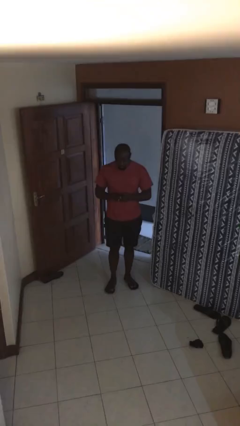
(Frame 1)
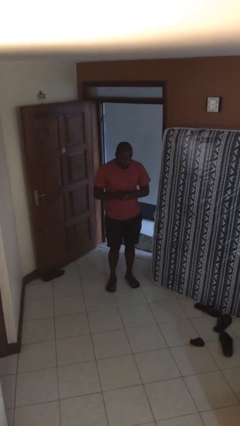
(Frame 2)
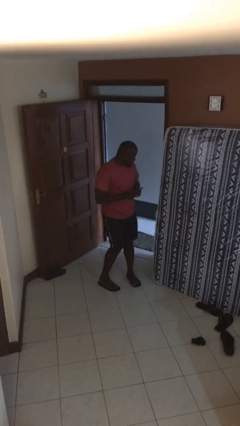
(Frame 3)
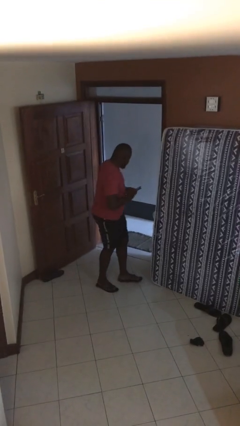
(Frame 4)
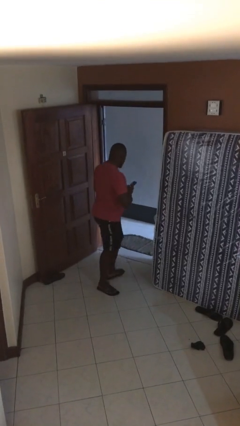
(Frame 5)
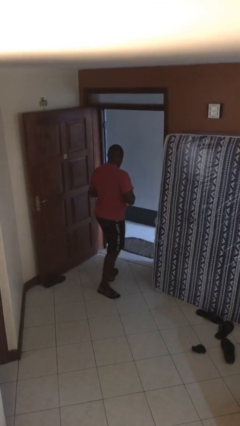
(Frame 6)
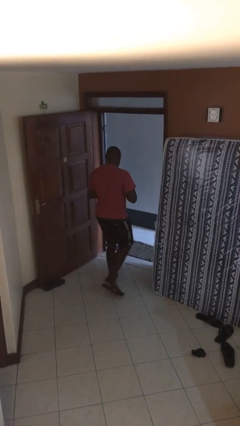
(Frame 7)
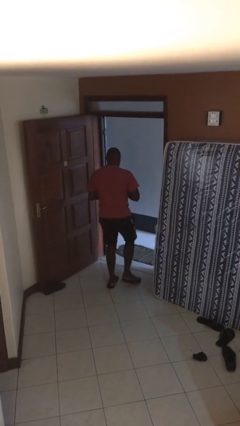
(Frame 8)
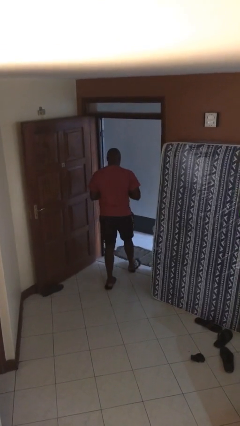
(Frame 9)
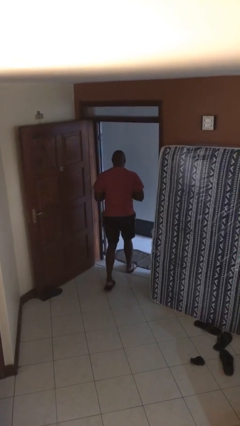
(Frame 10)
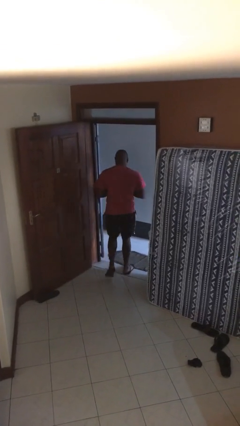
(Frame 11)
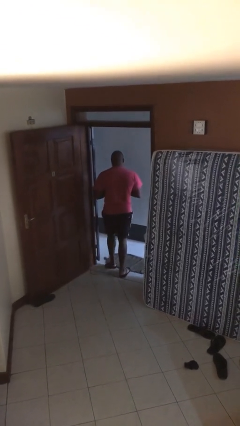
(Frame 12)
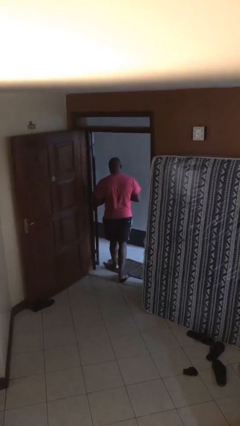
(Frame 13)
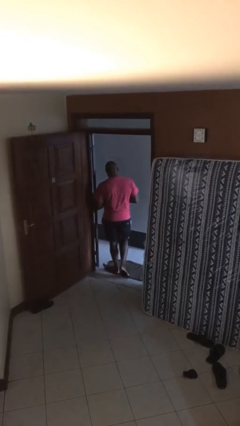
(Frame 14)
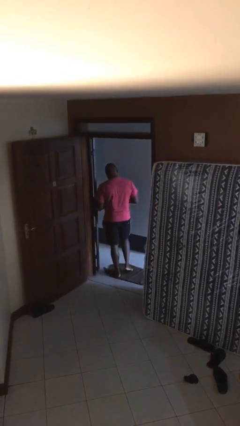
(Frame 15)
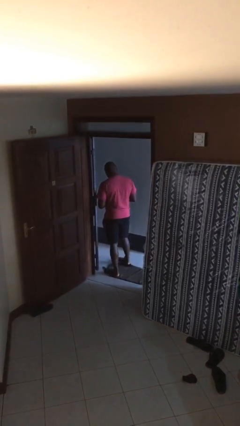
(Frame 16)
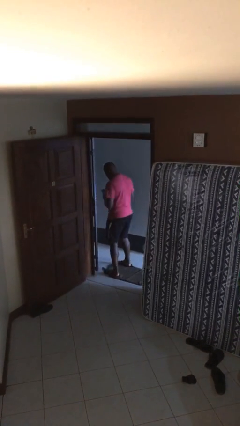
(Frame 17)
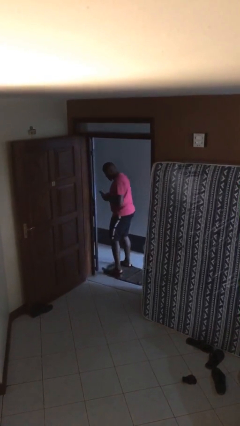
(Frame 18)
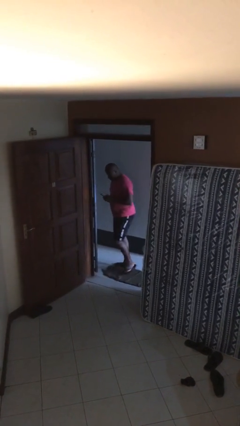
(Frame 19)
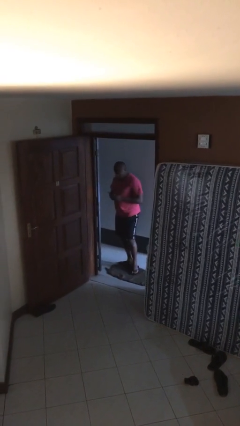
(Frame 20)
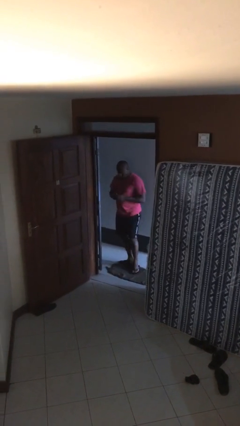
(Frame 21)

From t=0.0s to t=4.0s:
person exits scene through structure

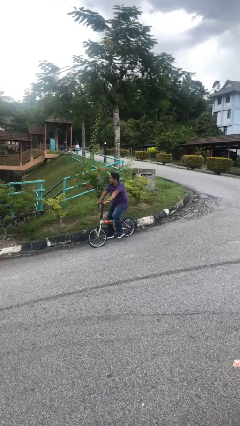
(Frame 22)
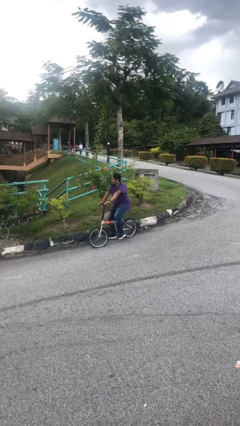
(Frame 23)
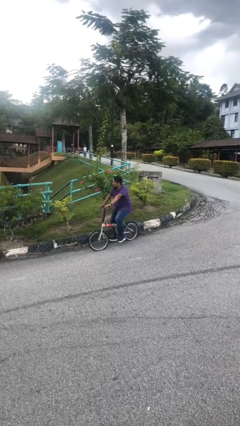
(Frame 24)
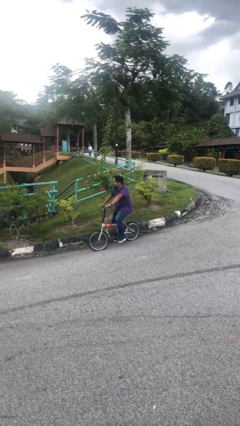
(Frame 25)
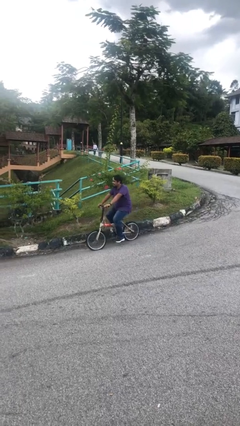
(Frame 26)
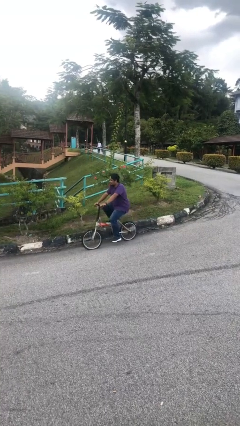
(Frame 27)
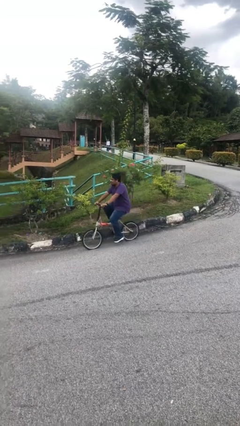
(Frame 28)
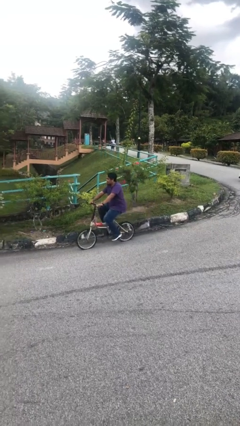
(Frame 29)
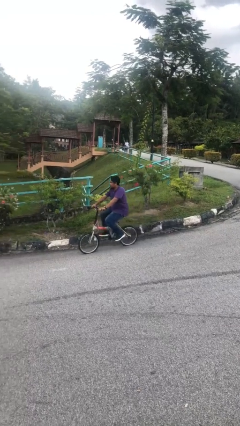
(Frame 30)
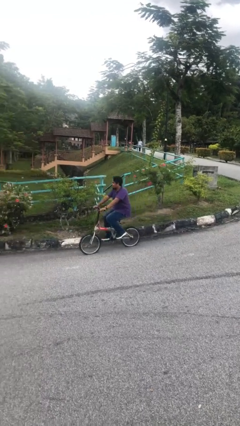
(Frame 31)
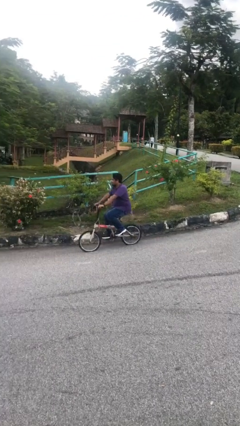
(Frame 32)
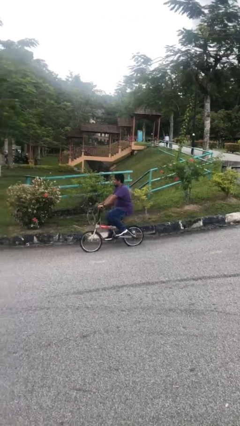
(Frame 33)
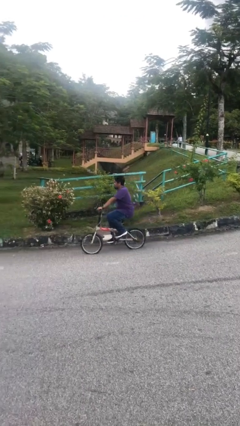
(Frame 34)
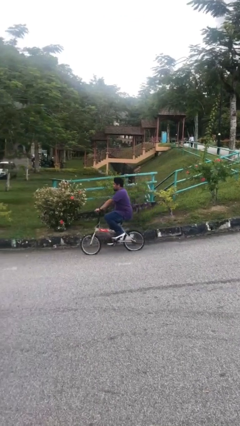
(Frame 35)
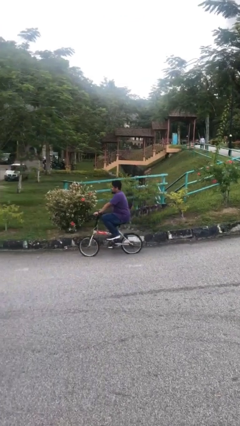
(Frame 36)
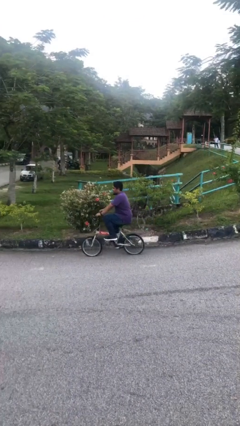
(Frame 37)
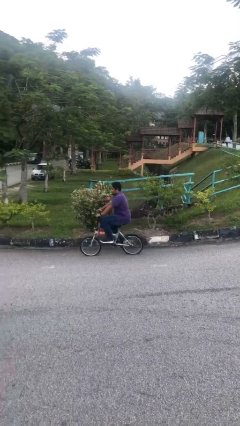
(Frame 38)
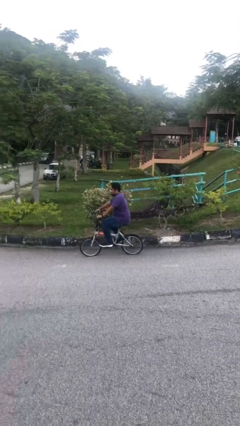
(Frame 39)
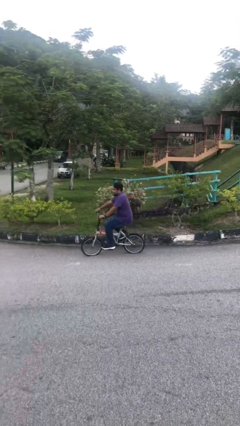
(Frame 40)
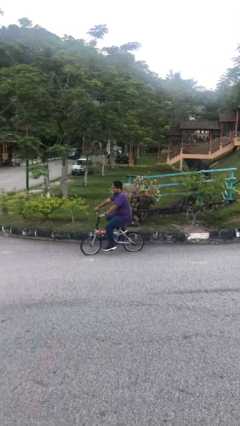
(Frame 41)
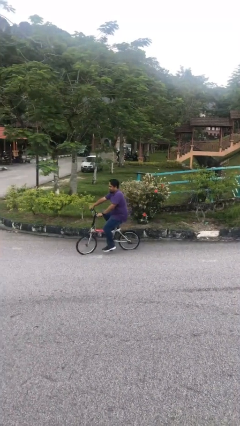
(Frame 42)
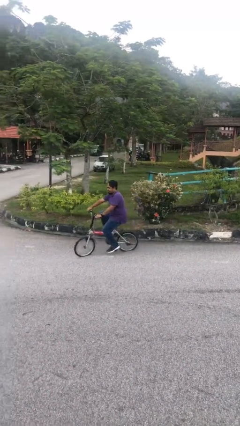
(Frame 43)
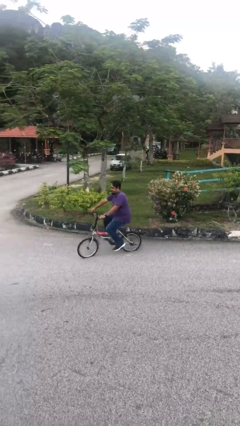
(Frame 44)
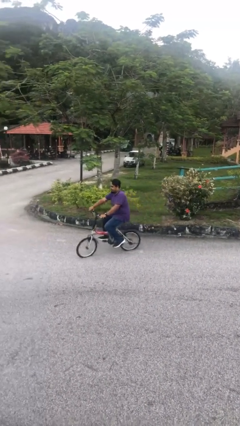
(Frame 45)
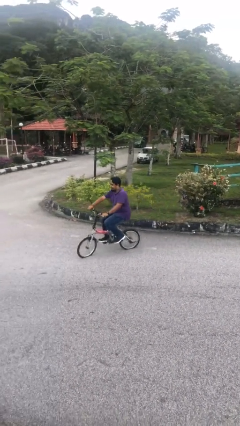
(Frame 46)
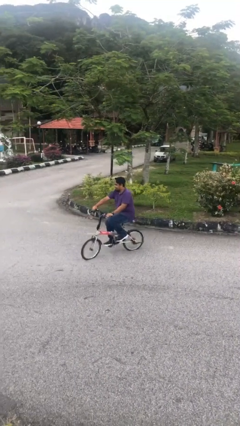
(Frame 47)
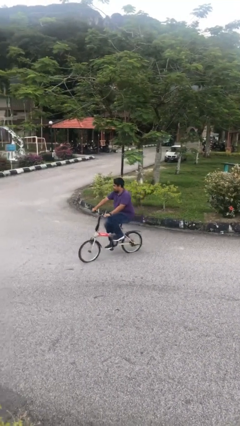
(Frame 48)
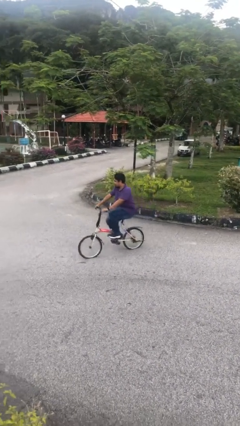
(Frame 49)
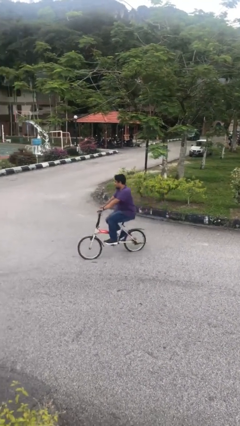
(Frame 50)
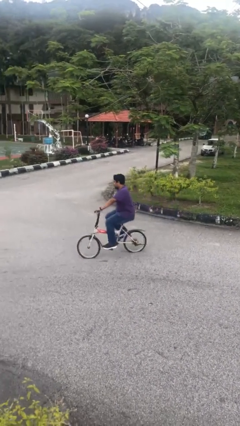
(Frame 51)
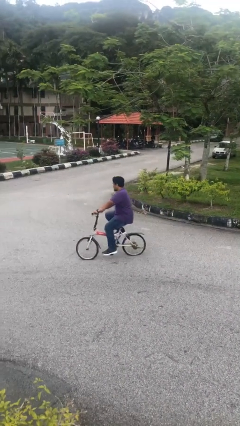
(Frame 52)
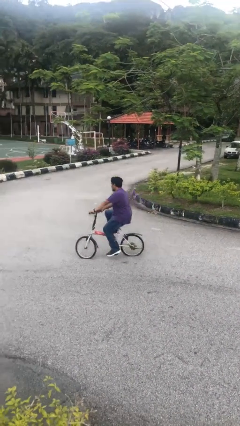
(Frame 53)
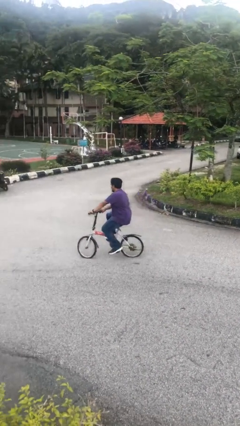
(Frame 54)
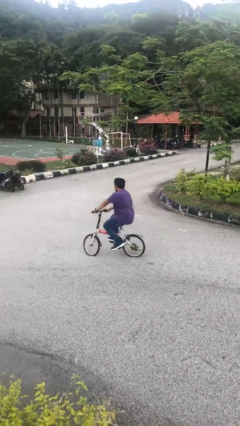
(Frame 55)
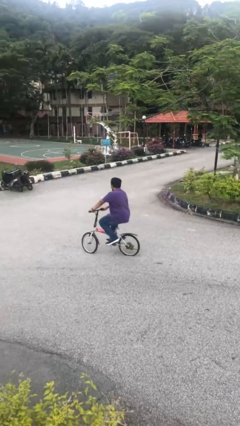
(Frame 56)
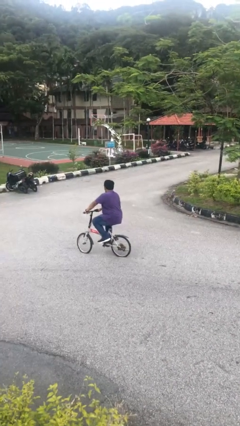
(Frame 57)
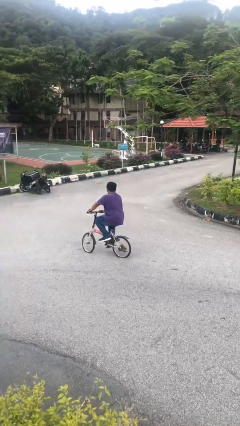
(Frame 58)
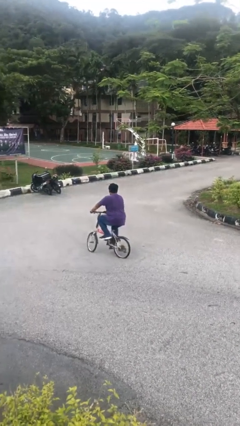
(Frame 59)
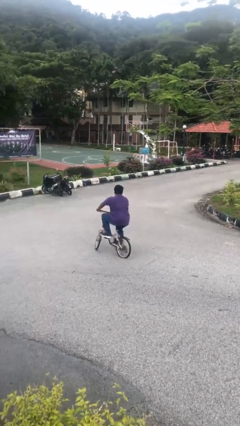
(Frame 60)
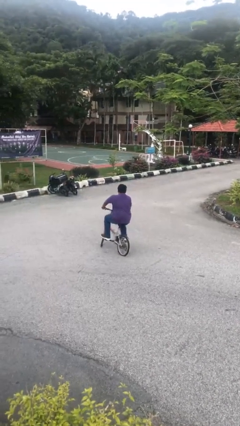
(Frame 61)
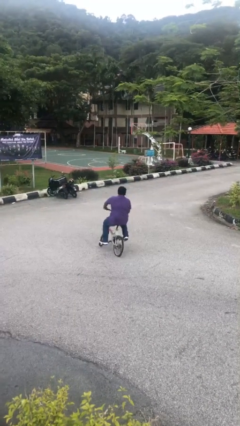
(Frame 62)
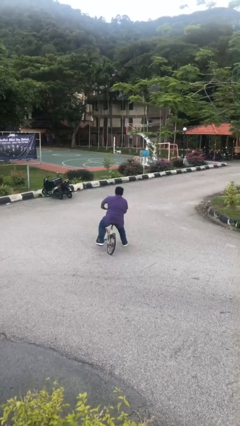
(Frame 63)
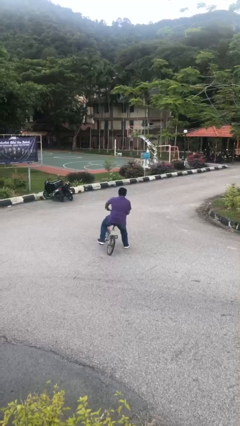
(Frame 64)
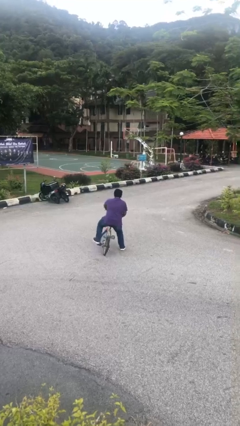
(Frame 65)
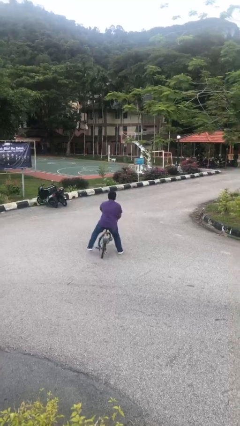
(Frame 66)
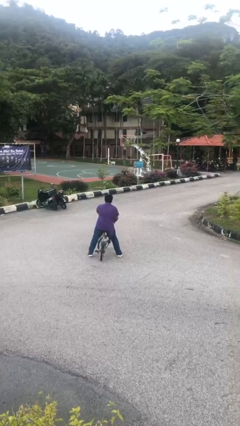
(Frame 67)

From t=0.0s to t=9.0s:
person rides bicycle

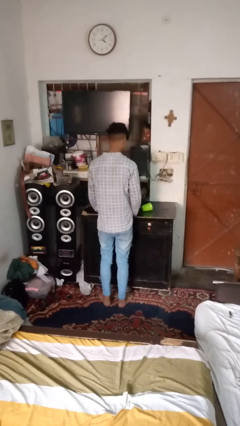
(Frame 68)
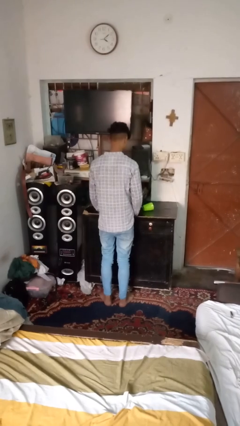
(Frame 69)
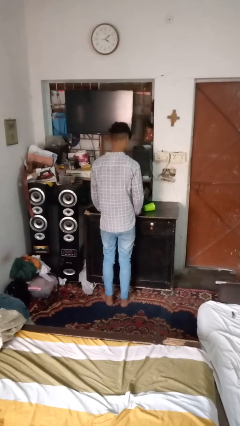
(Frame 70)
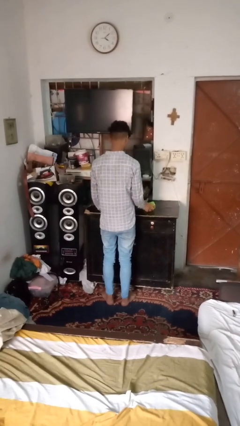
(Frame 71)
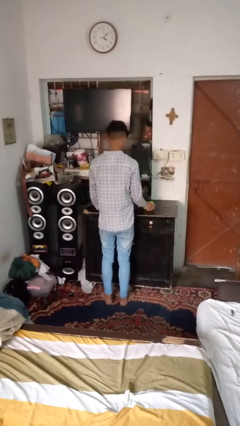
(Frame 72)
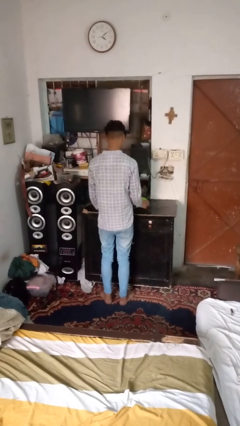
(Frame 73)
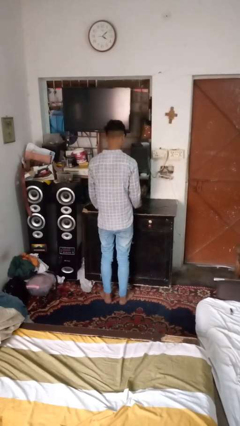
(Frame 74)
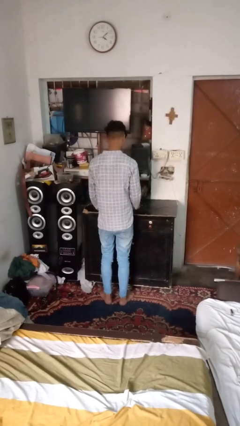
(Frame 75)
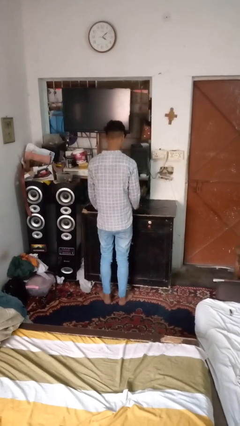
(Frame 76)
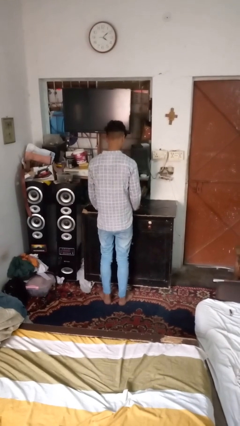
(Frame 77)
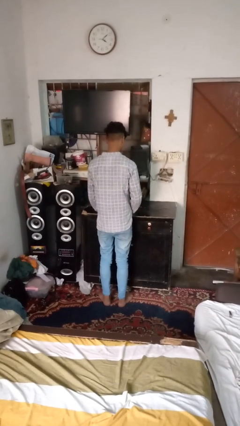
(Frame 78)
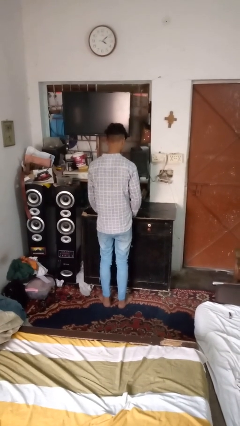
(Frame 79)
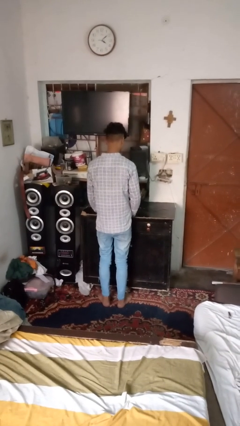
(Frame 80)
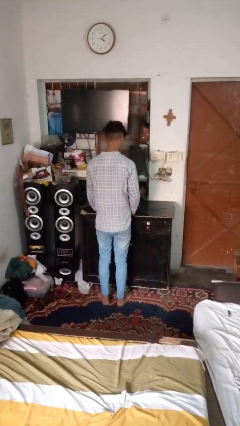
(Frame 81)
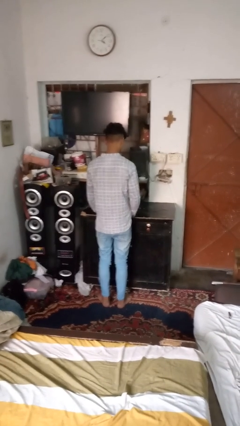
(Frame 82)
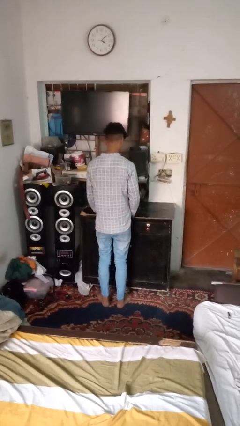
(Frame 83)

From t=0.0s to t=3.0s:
person sets upright glass

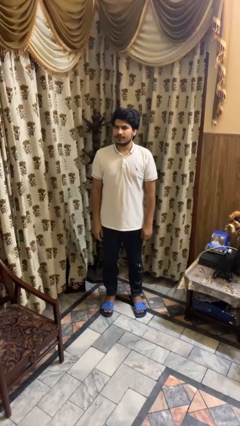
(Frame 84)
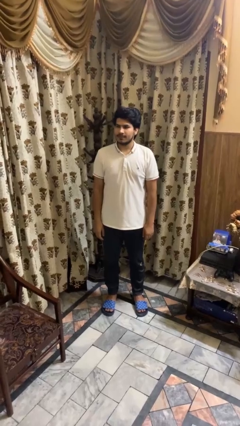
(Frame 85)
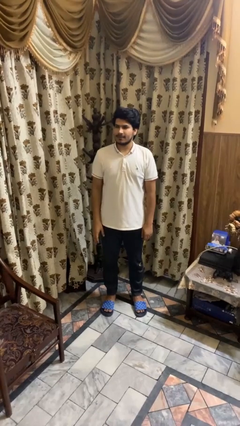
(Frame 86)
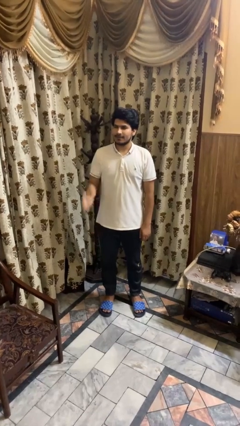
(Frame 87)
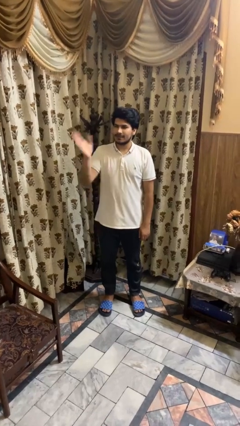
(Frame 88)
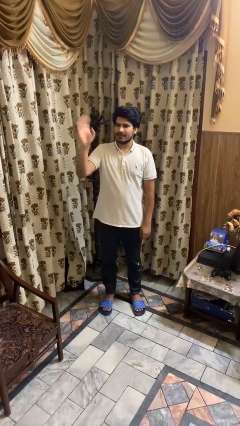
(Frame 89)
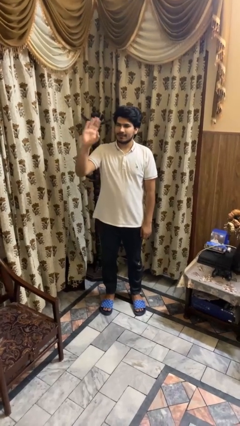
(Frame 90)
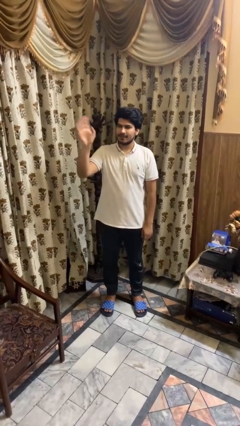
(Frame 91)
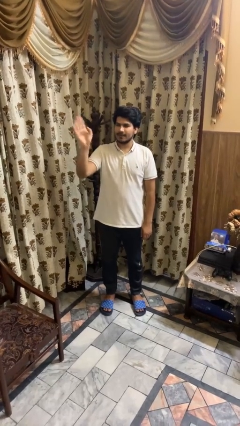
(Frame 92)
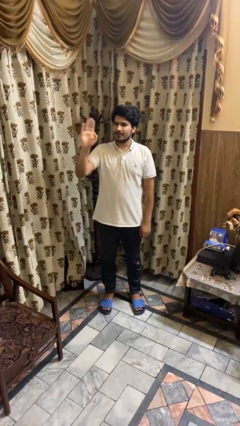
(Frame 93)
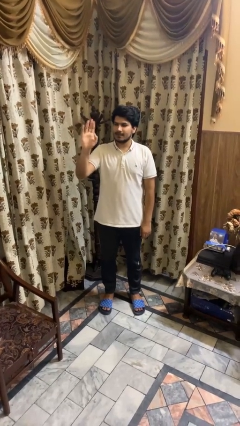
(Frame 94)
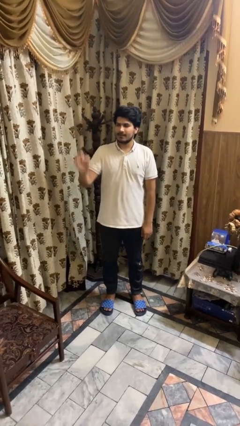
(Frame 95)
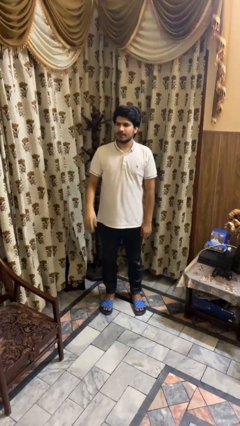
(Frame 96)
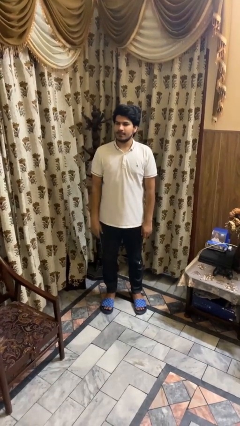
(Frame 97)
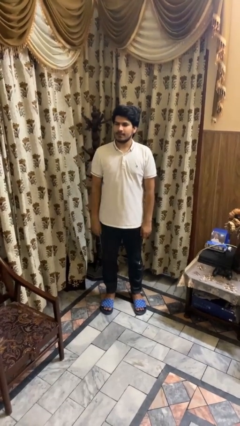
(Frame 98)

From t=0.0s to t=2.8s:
person waves at person
